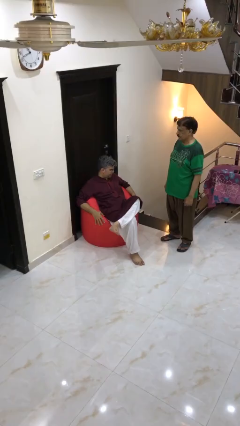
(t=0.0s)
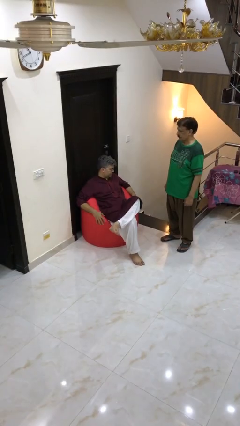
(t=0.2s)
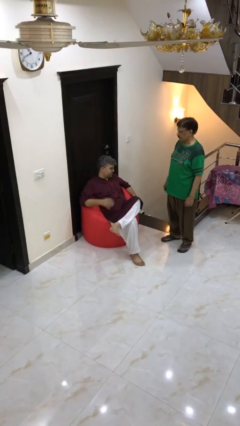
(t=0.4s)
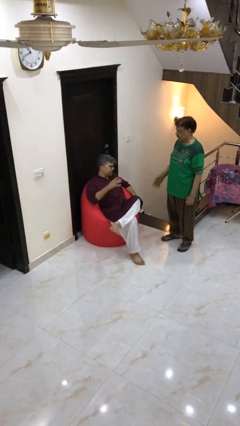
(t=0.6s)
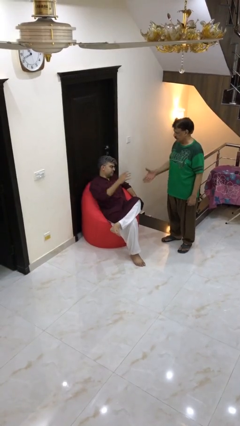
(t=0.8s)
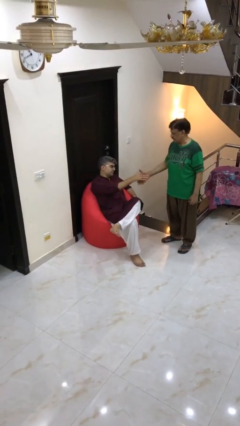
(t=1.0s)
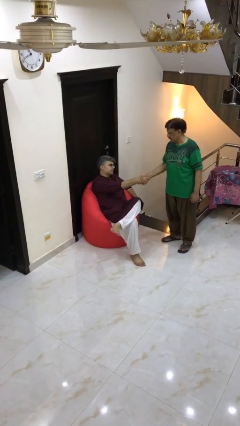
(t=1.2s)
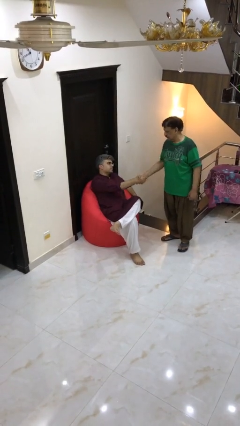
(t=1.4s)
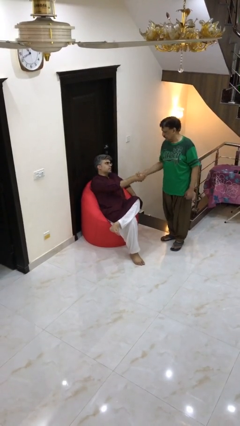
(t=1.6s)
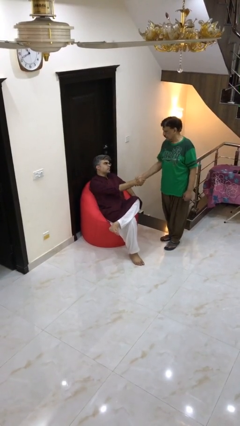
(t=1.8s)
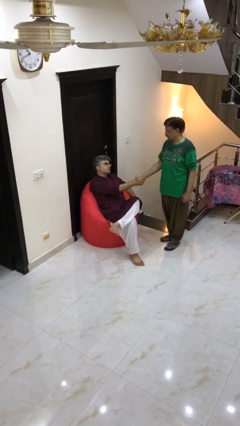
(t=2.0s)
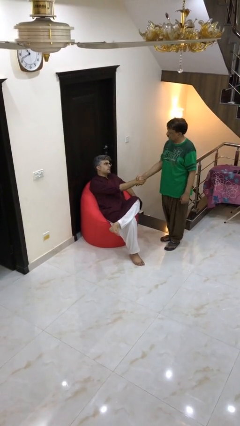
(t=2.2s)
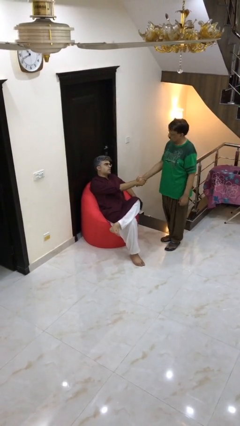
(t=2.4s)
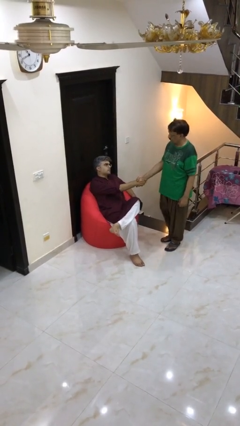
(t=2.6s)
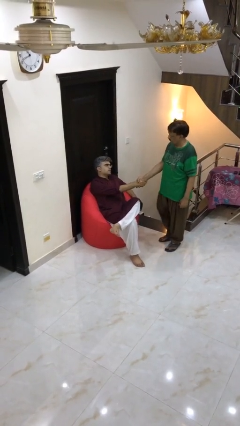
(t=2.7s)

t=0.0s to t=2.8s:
person shakes hand

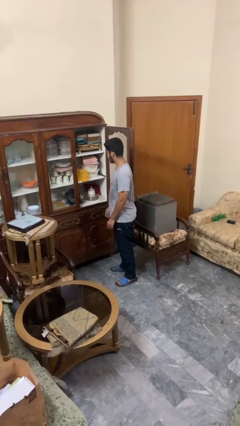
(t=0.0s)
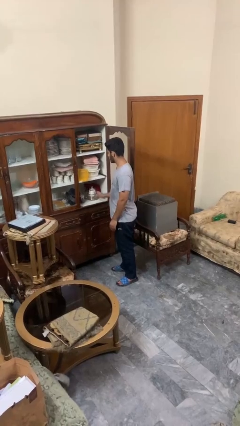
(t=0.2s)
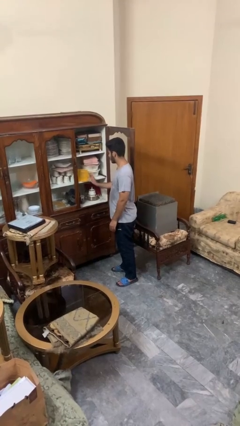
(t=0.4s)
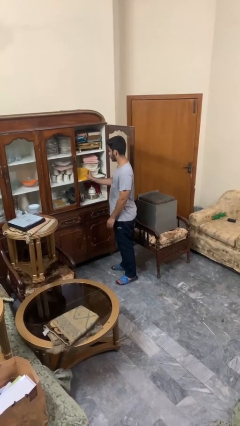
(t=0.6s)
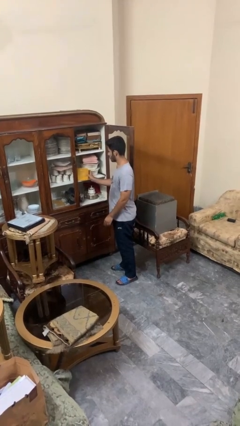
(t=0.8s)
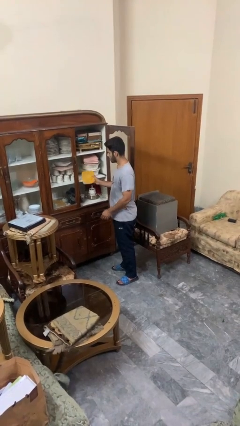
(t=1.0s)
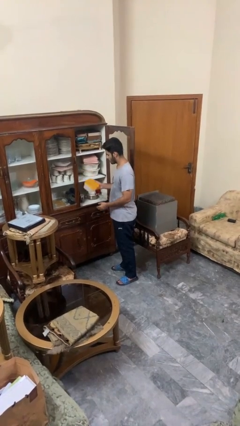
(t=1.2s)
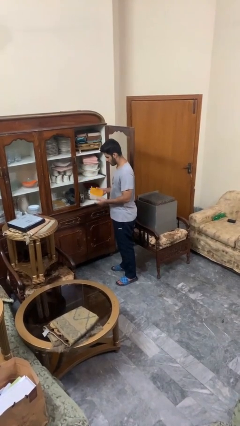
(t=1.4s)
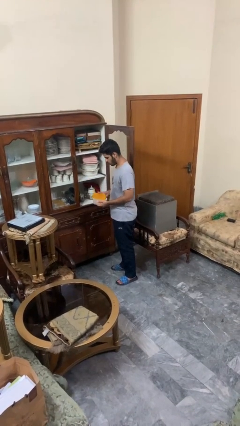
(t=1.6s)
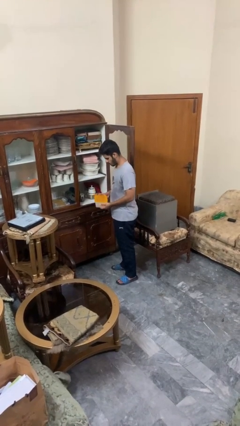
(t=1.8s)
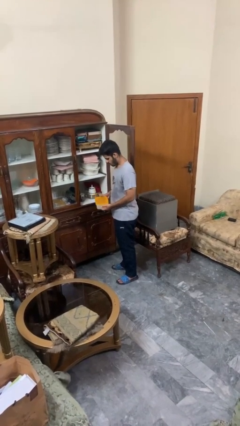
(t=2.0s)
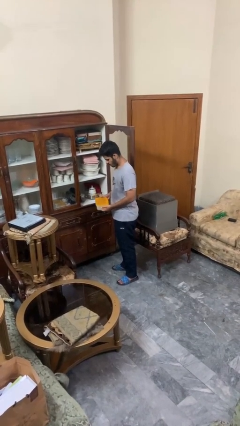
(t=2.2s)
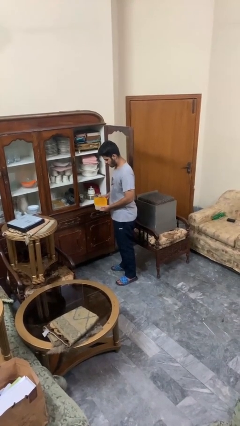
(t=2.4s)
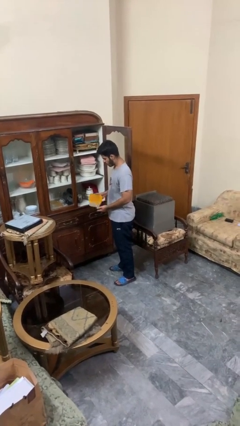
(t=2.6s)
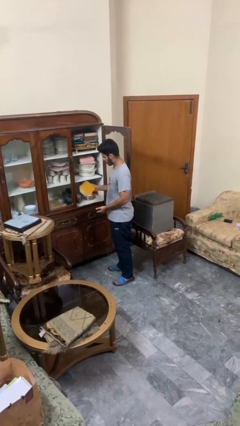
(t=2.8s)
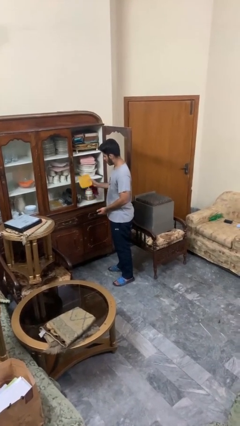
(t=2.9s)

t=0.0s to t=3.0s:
person picks up object from cabinet

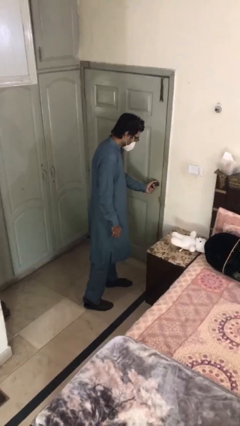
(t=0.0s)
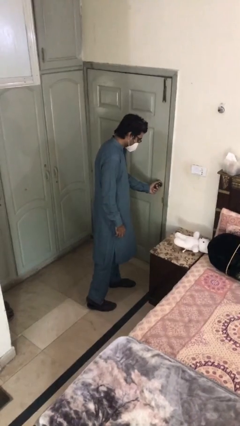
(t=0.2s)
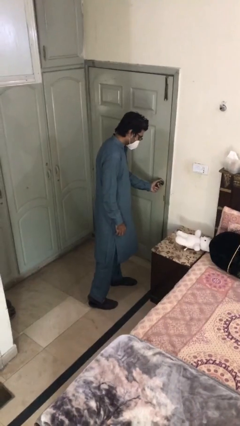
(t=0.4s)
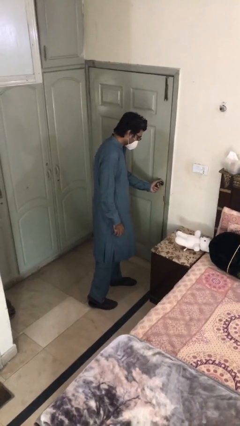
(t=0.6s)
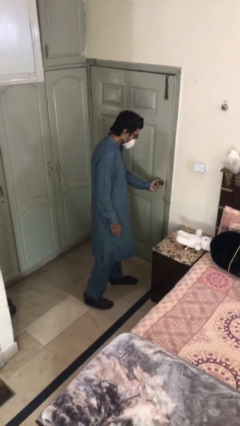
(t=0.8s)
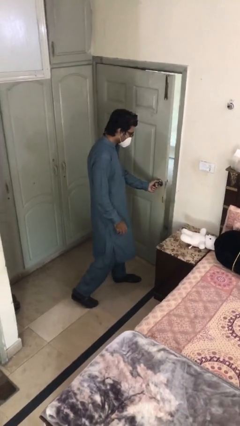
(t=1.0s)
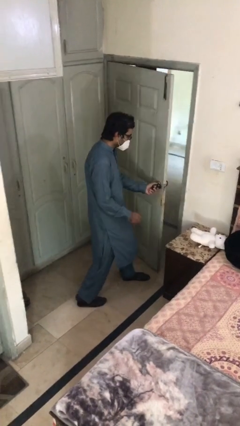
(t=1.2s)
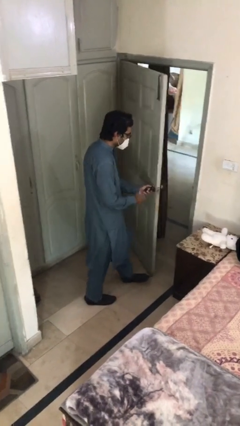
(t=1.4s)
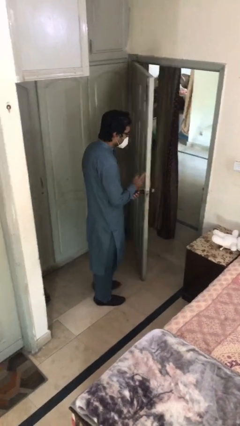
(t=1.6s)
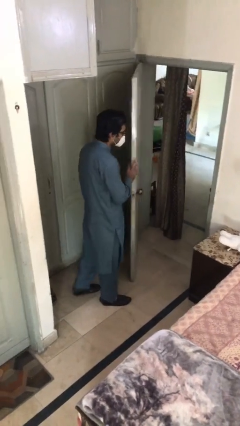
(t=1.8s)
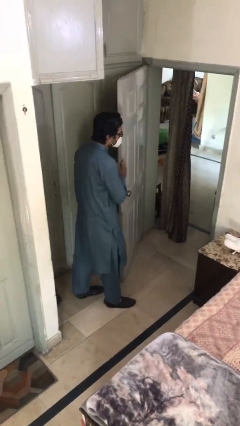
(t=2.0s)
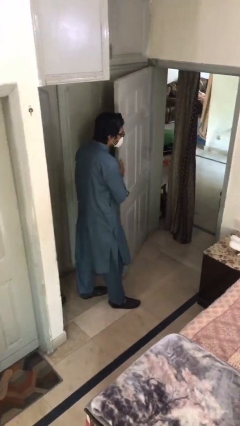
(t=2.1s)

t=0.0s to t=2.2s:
person opens facility door

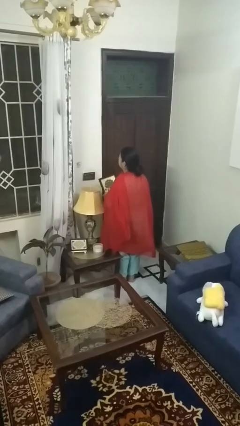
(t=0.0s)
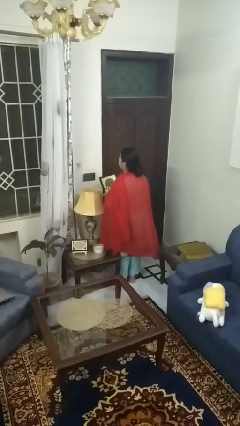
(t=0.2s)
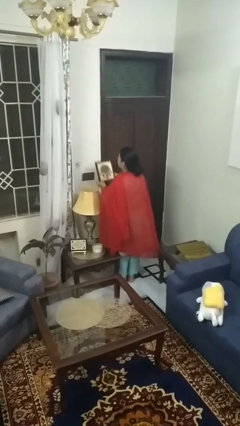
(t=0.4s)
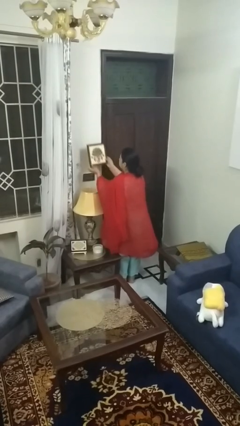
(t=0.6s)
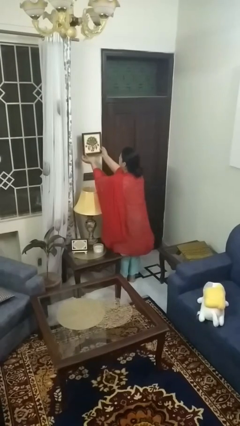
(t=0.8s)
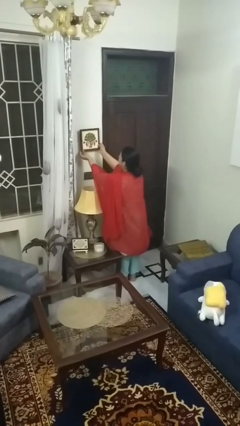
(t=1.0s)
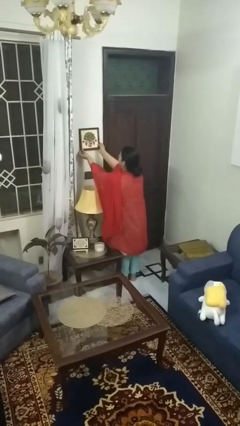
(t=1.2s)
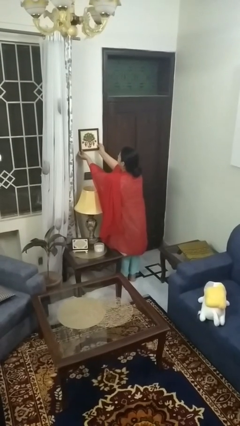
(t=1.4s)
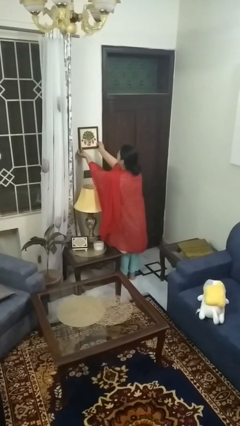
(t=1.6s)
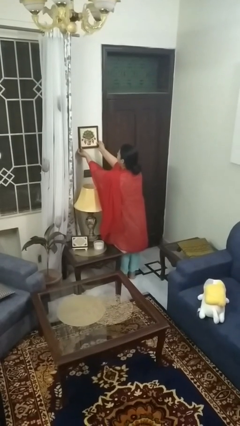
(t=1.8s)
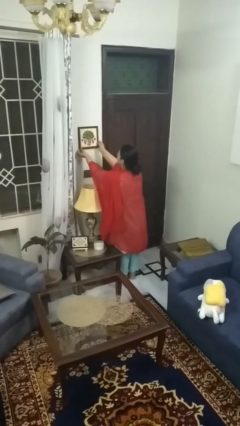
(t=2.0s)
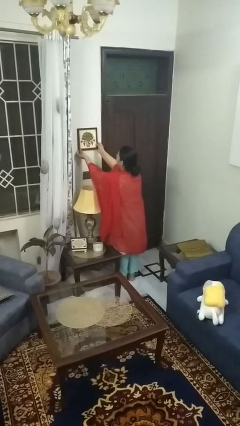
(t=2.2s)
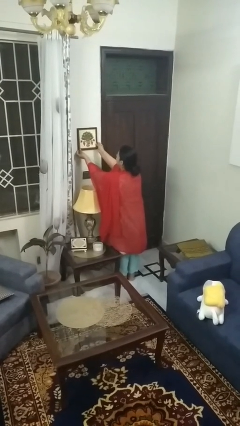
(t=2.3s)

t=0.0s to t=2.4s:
person puts up picture frame

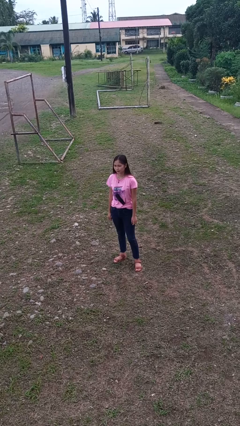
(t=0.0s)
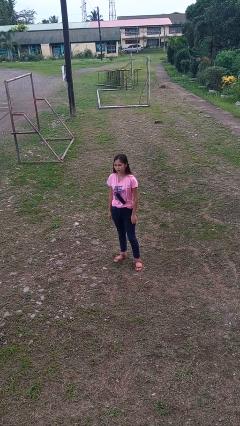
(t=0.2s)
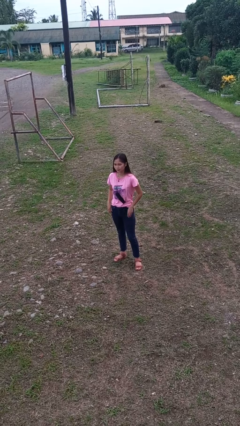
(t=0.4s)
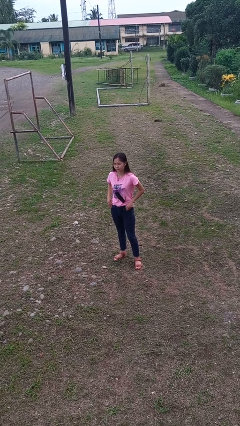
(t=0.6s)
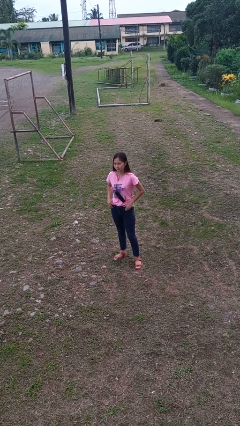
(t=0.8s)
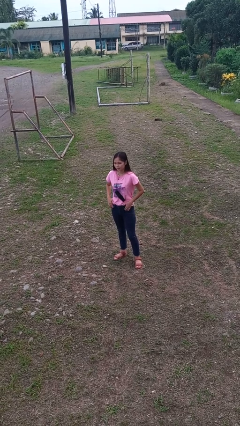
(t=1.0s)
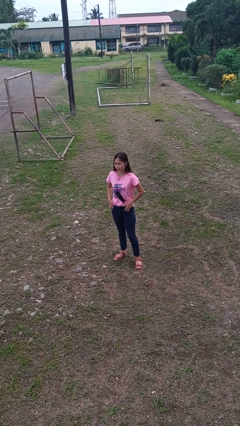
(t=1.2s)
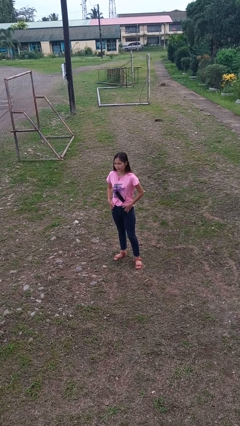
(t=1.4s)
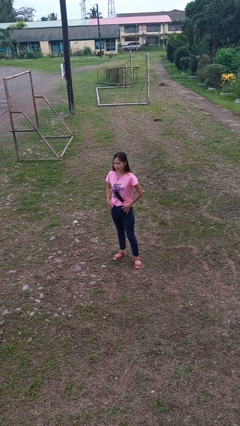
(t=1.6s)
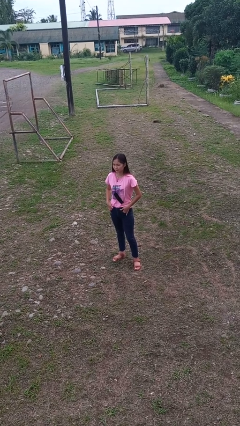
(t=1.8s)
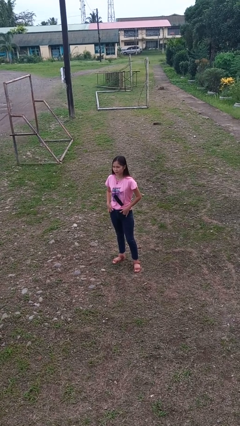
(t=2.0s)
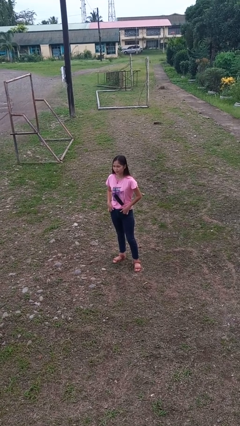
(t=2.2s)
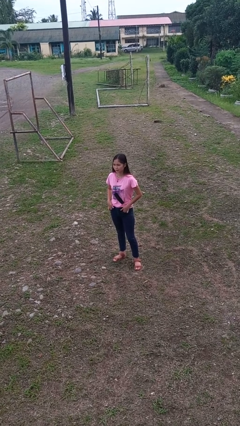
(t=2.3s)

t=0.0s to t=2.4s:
person puts hands in back pockets

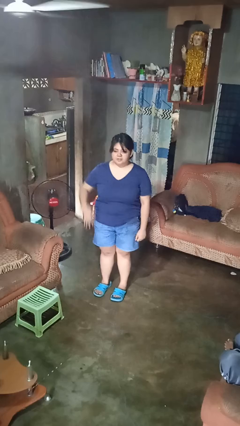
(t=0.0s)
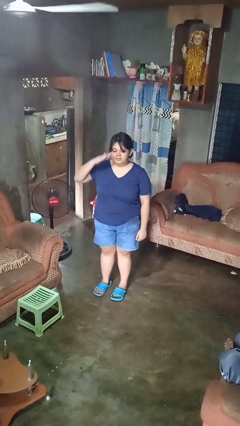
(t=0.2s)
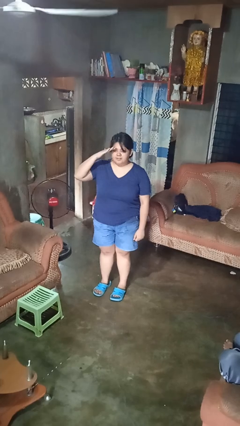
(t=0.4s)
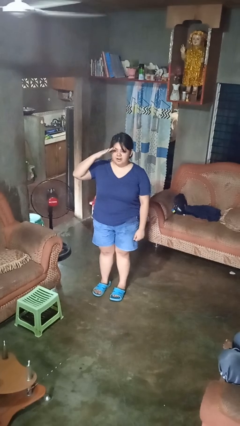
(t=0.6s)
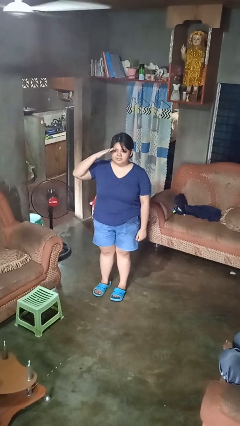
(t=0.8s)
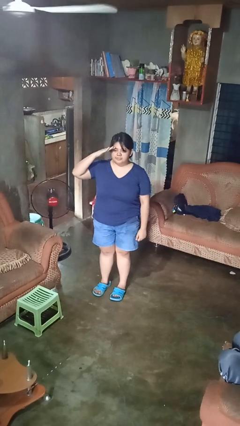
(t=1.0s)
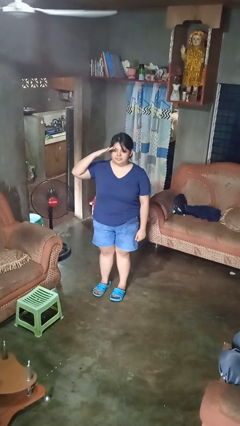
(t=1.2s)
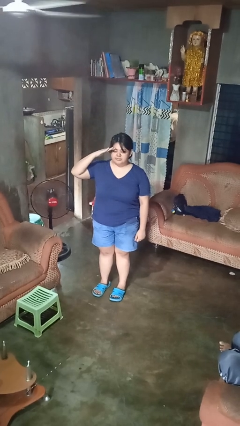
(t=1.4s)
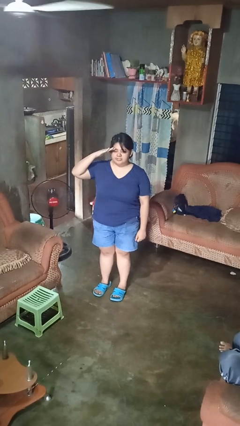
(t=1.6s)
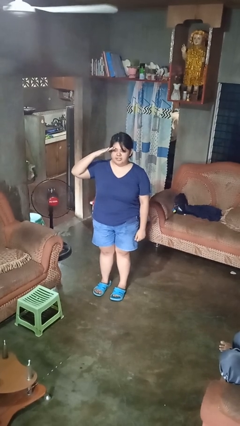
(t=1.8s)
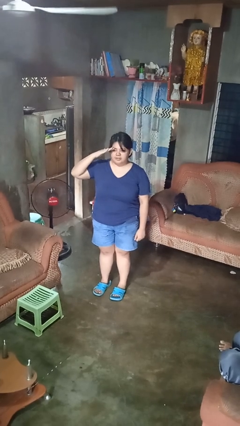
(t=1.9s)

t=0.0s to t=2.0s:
person salutes

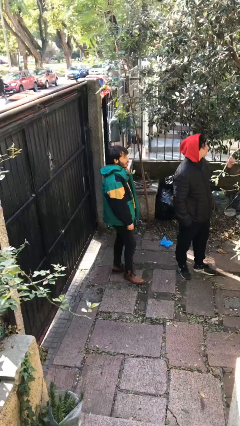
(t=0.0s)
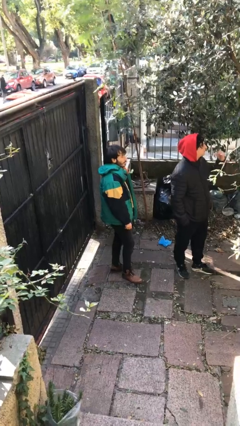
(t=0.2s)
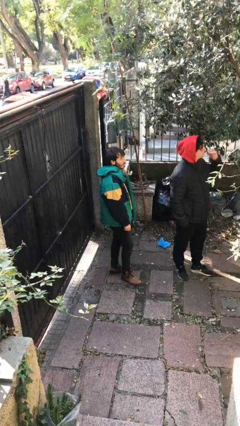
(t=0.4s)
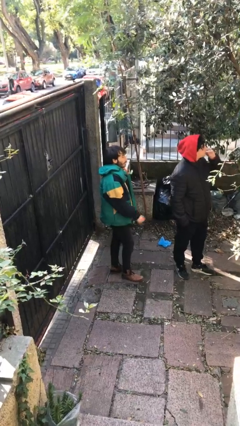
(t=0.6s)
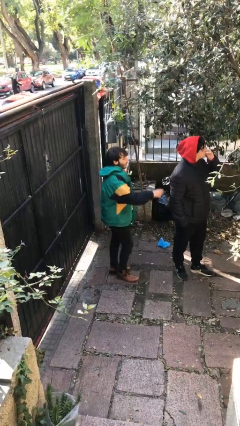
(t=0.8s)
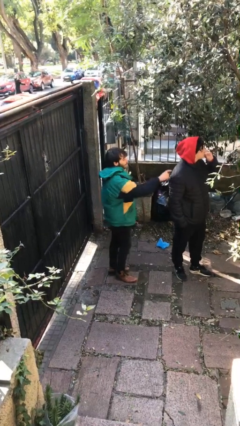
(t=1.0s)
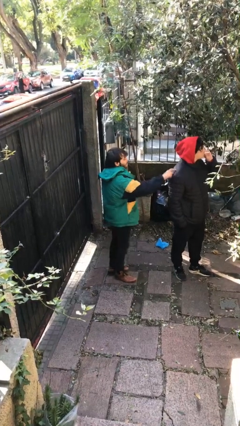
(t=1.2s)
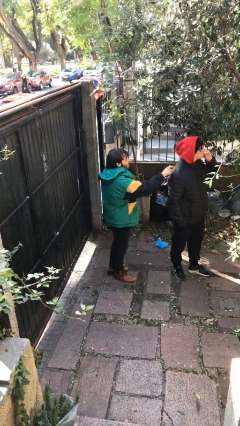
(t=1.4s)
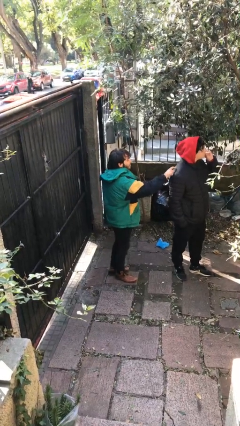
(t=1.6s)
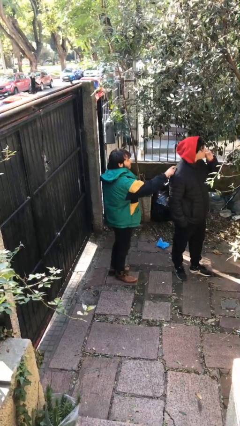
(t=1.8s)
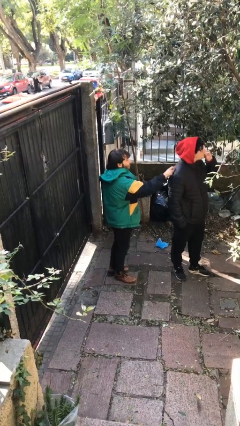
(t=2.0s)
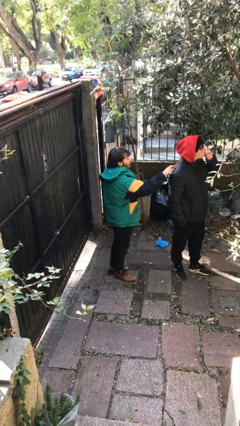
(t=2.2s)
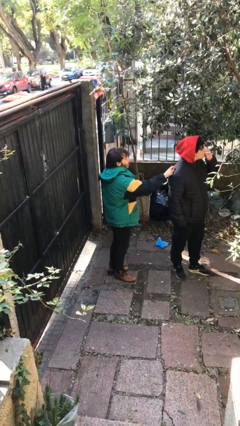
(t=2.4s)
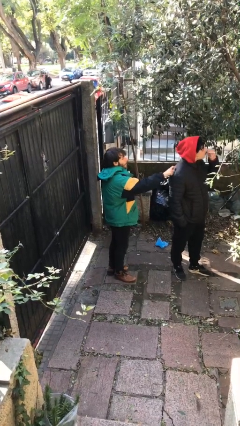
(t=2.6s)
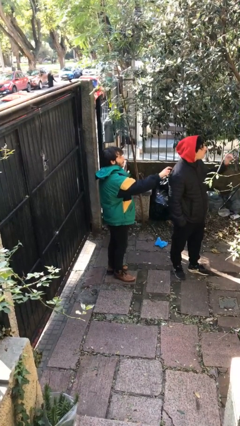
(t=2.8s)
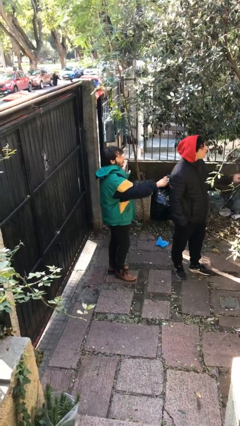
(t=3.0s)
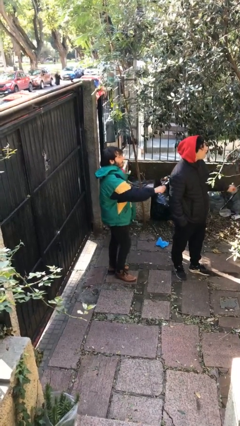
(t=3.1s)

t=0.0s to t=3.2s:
person touches back of person
